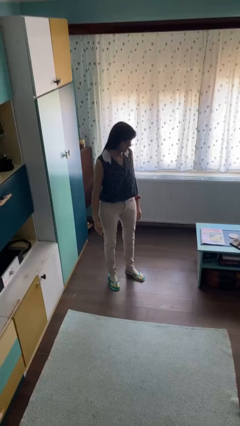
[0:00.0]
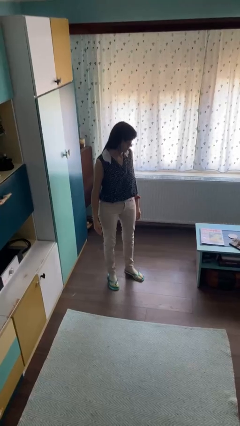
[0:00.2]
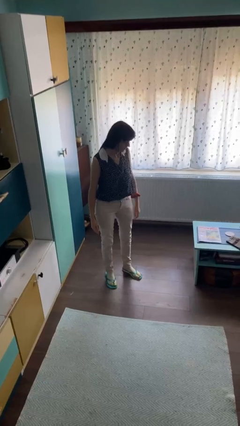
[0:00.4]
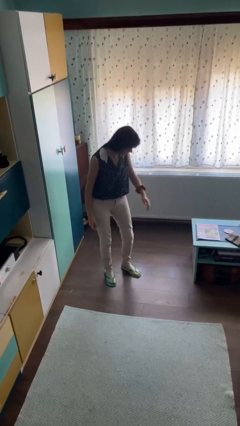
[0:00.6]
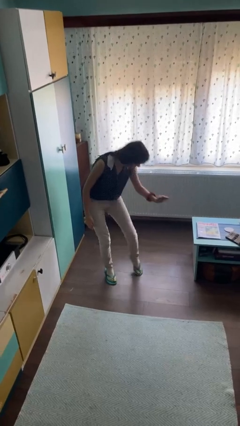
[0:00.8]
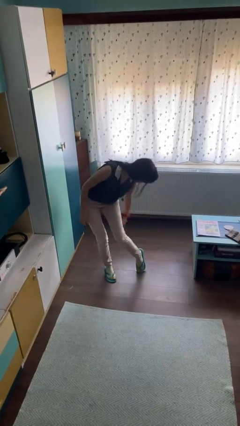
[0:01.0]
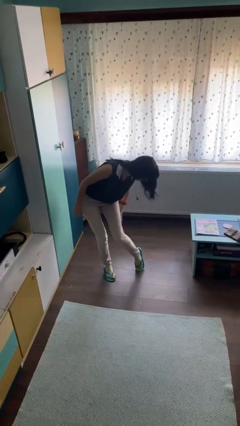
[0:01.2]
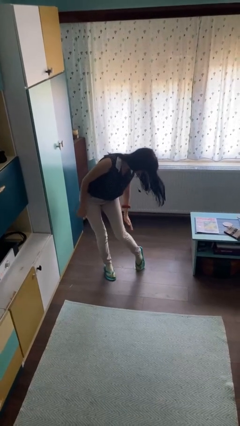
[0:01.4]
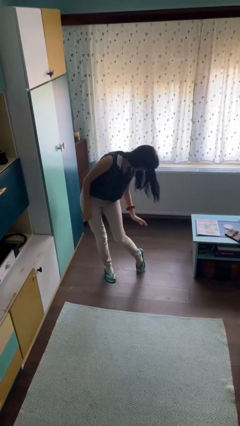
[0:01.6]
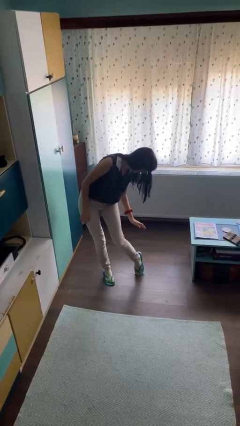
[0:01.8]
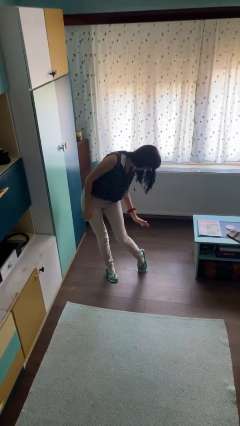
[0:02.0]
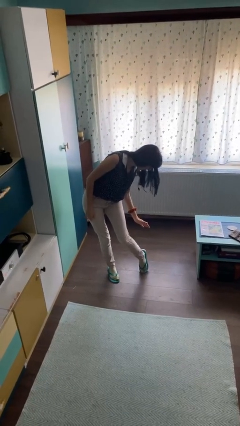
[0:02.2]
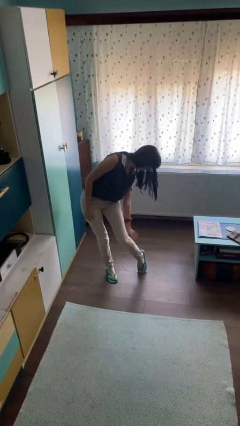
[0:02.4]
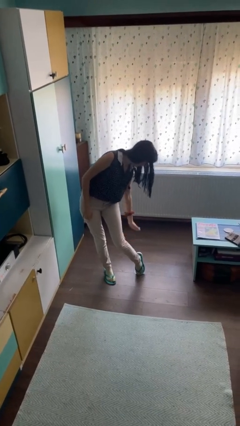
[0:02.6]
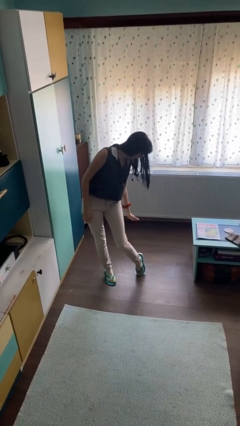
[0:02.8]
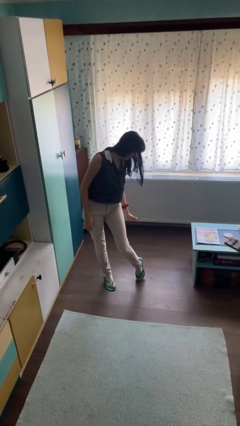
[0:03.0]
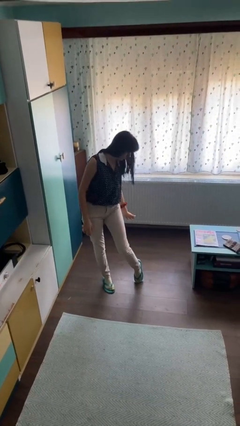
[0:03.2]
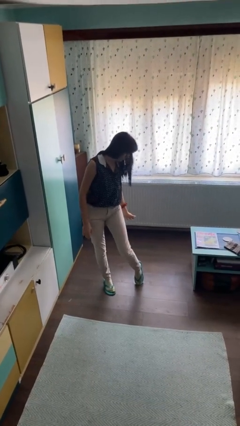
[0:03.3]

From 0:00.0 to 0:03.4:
person swats bug

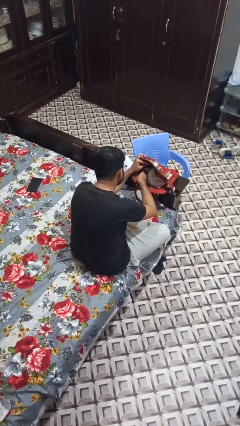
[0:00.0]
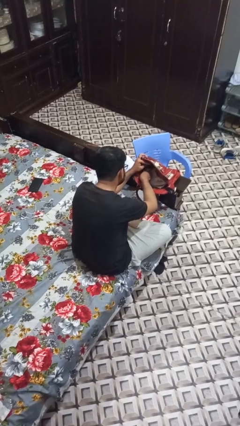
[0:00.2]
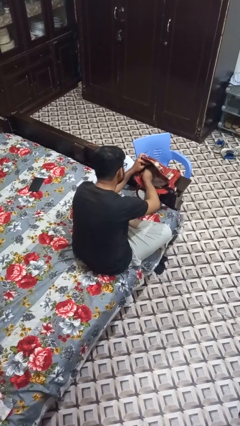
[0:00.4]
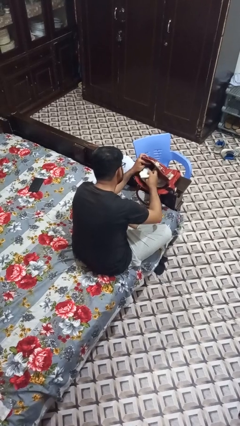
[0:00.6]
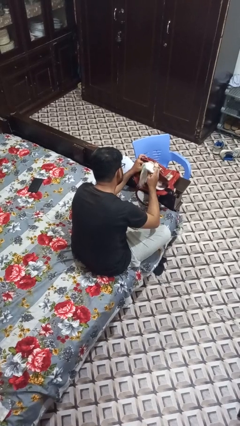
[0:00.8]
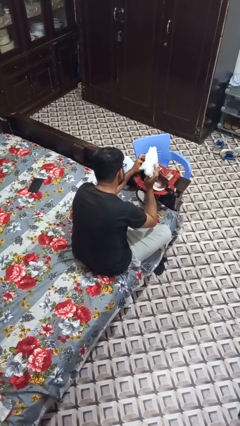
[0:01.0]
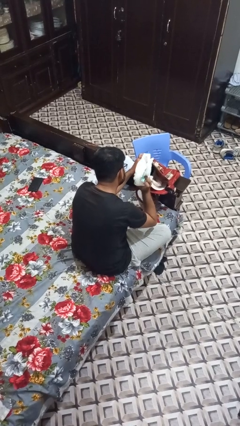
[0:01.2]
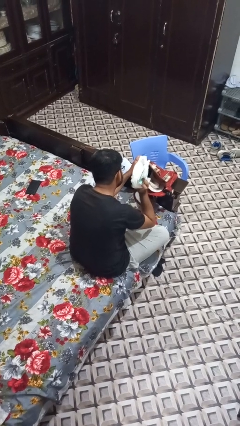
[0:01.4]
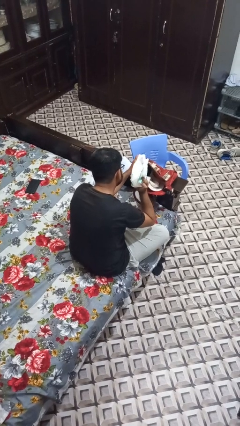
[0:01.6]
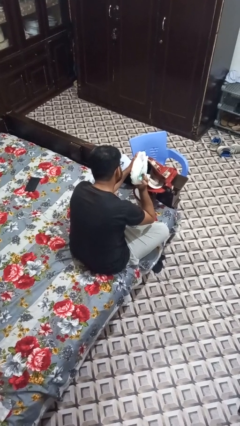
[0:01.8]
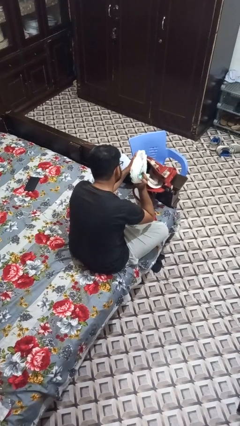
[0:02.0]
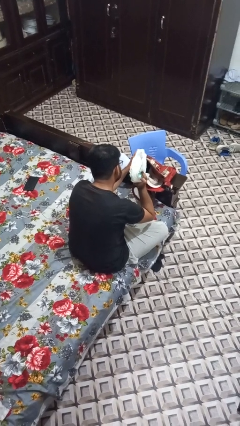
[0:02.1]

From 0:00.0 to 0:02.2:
person takes object from purse

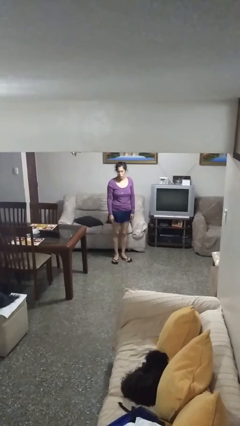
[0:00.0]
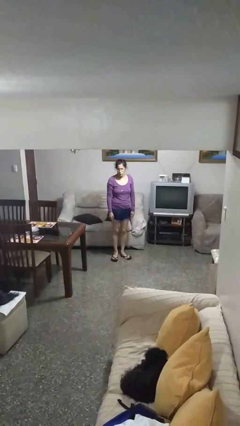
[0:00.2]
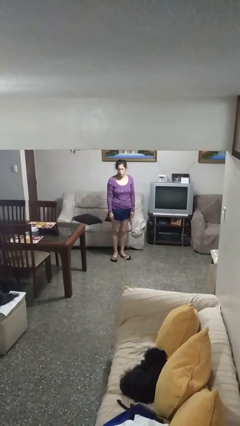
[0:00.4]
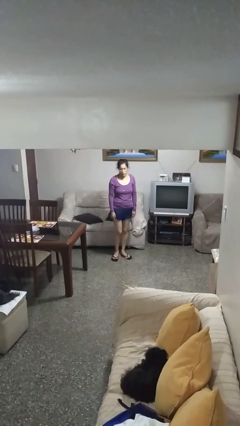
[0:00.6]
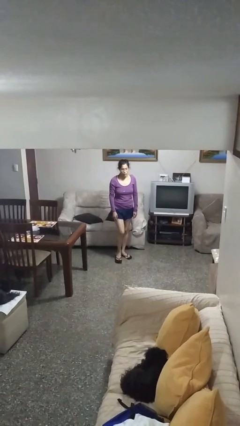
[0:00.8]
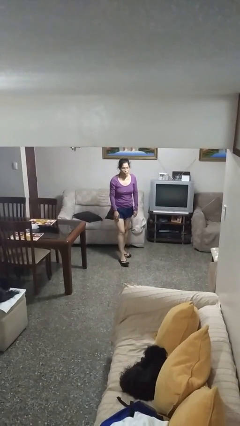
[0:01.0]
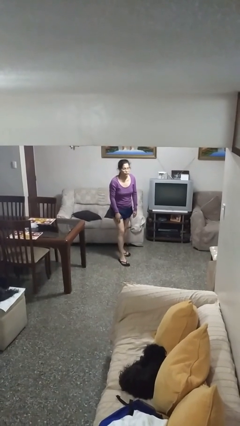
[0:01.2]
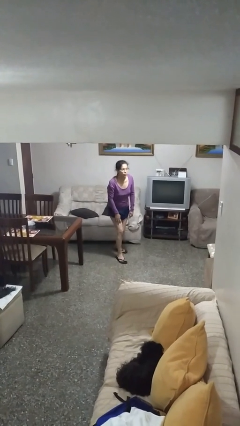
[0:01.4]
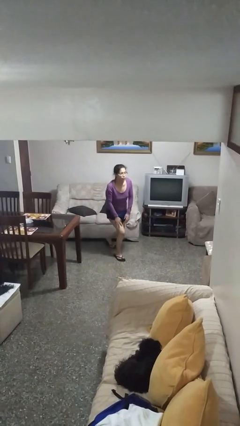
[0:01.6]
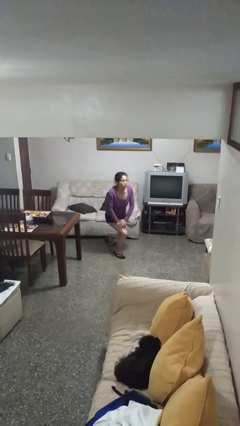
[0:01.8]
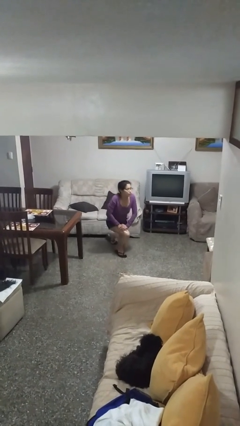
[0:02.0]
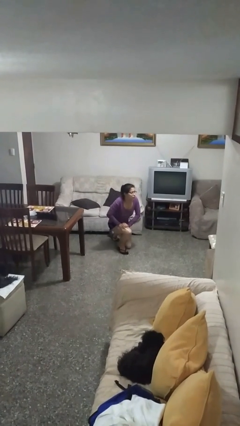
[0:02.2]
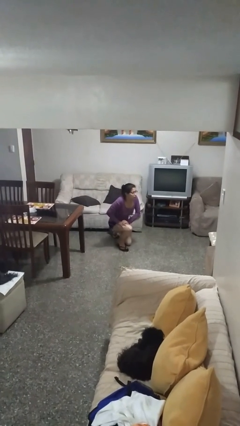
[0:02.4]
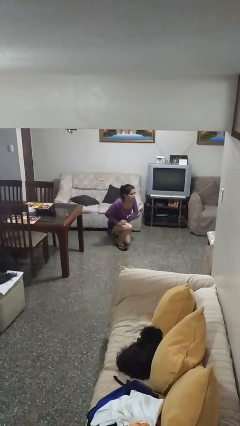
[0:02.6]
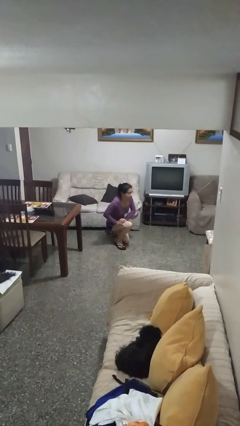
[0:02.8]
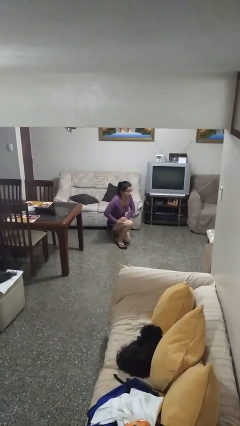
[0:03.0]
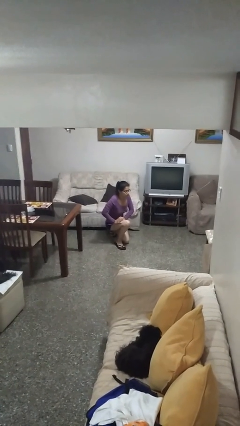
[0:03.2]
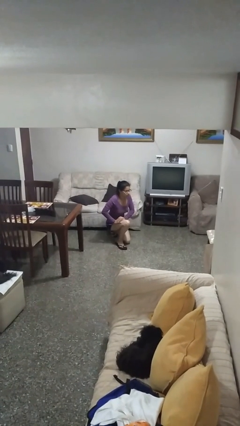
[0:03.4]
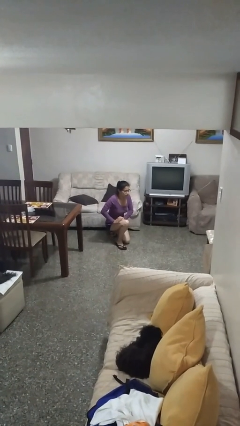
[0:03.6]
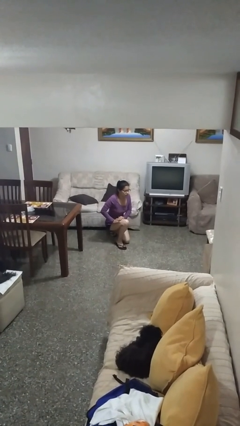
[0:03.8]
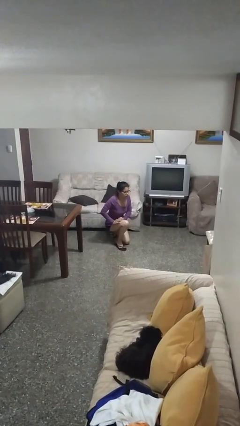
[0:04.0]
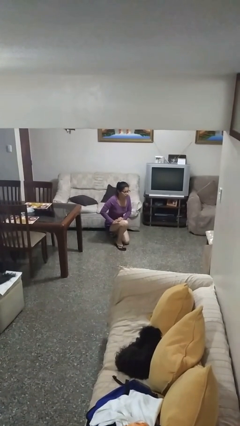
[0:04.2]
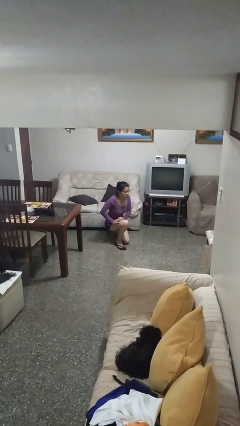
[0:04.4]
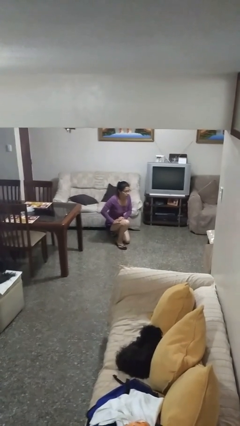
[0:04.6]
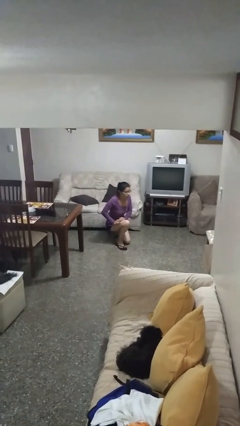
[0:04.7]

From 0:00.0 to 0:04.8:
person kneels

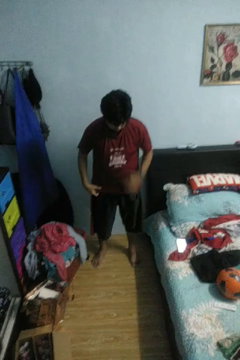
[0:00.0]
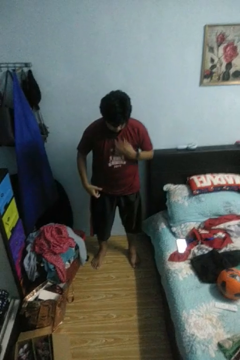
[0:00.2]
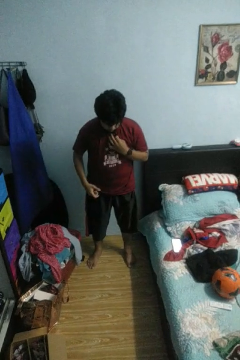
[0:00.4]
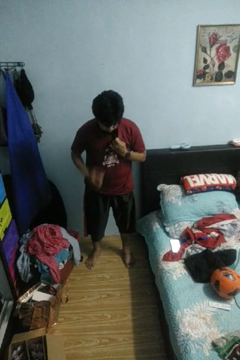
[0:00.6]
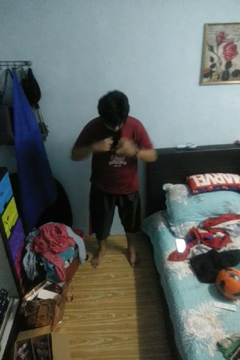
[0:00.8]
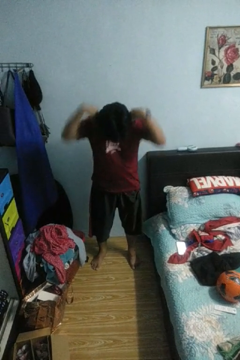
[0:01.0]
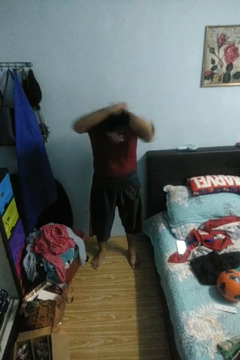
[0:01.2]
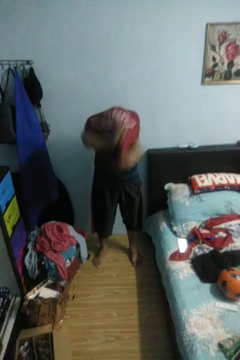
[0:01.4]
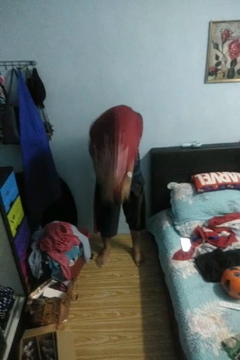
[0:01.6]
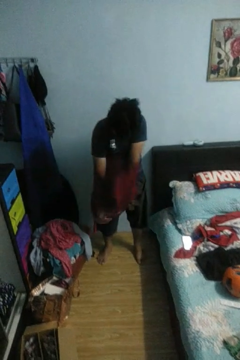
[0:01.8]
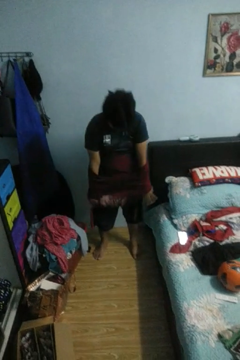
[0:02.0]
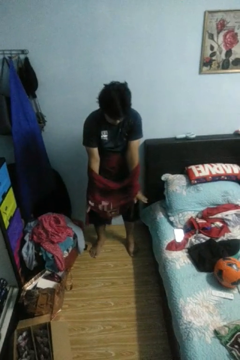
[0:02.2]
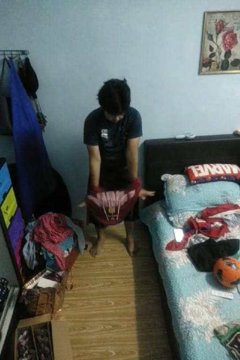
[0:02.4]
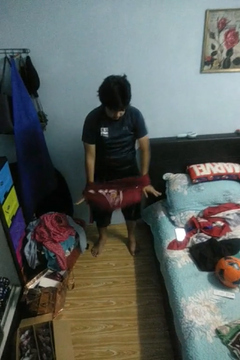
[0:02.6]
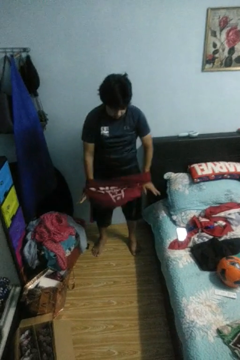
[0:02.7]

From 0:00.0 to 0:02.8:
person takes off shirt

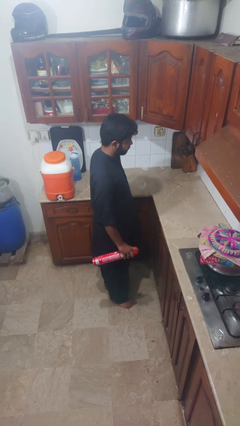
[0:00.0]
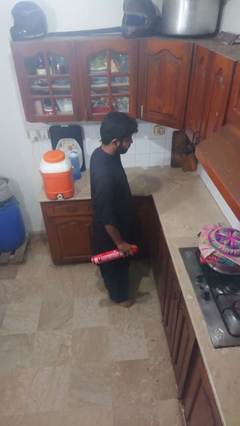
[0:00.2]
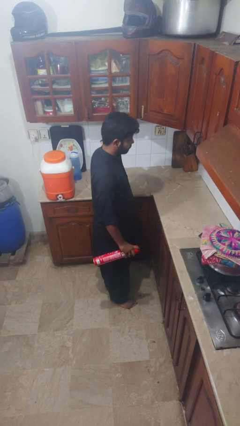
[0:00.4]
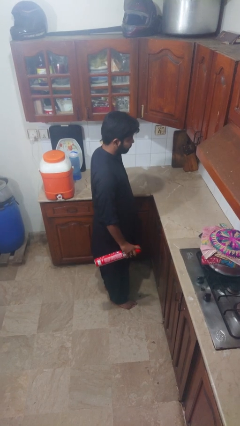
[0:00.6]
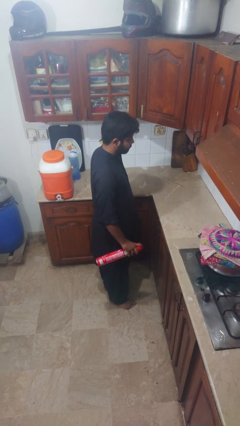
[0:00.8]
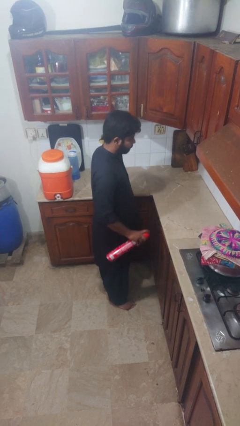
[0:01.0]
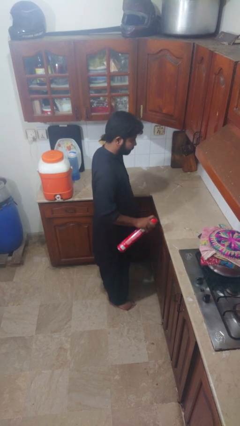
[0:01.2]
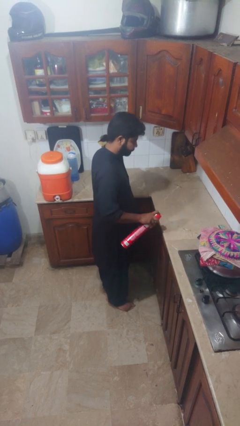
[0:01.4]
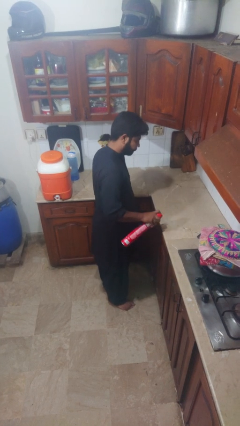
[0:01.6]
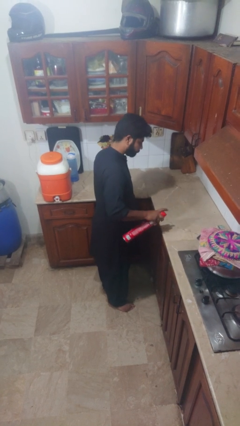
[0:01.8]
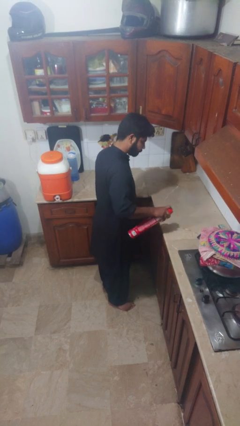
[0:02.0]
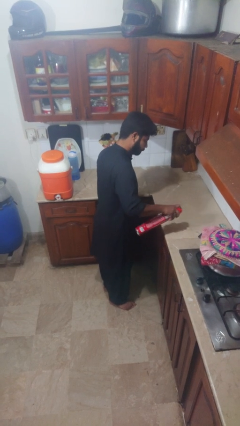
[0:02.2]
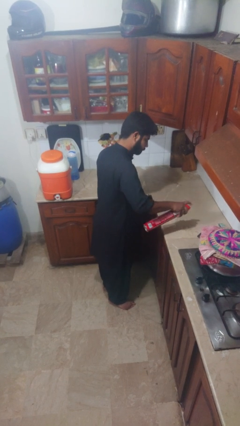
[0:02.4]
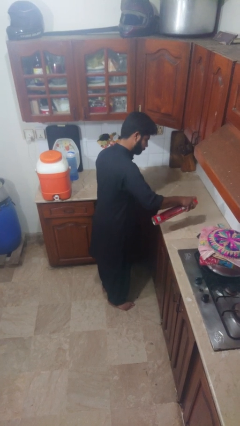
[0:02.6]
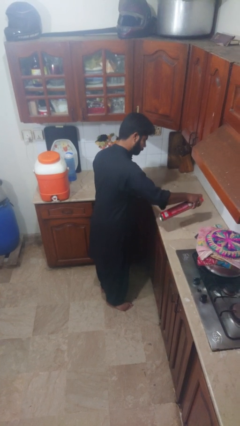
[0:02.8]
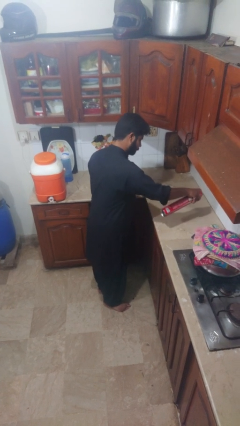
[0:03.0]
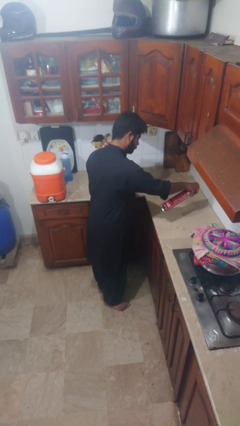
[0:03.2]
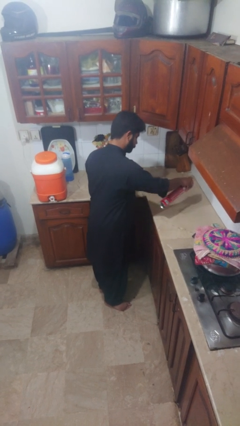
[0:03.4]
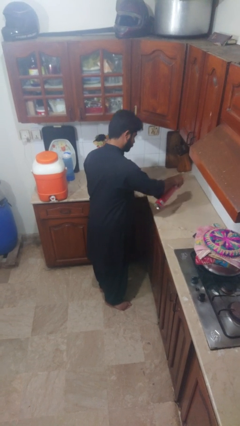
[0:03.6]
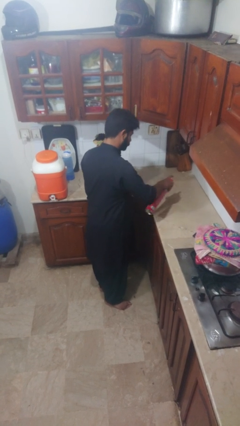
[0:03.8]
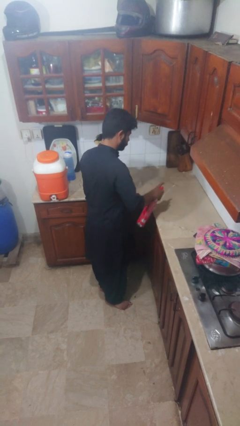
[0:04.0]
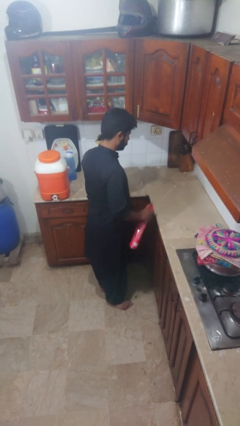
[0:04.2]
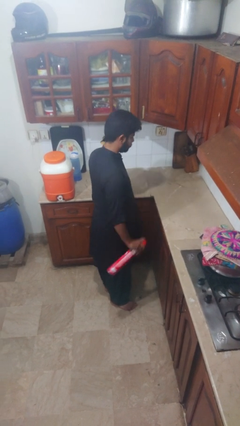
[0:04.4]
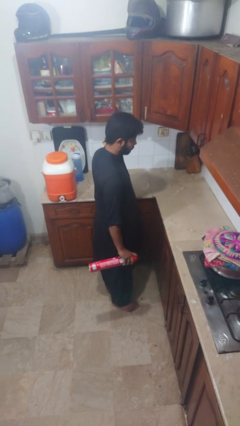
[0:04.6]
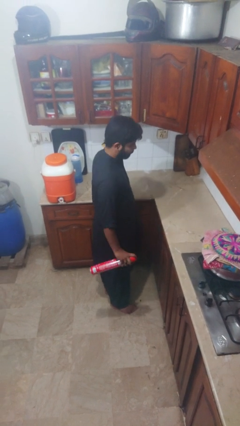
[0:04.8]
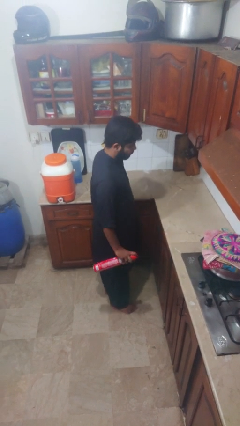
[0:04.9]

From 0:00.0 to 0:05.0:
person sprays from bottle
